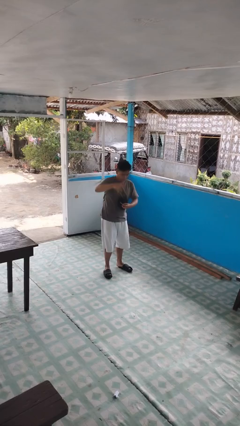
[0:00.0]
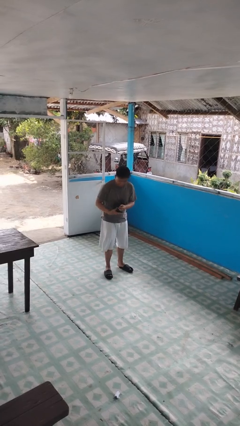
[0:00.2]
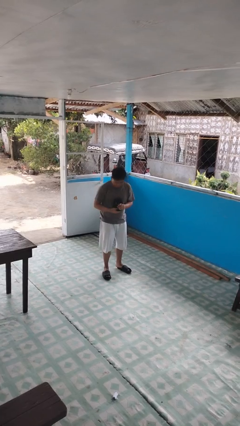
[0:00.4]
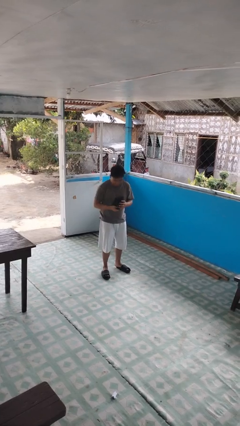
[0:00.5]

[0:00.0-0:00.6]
person catches dropped object

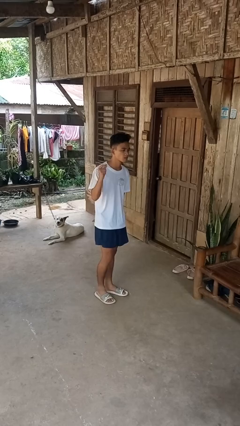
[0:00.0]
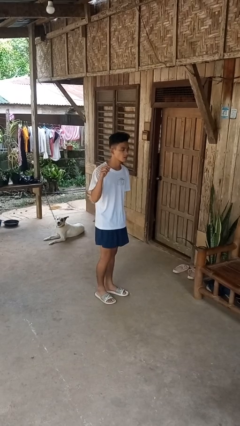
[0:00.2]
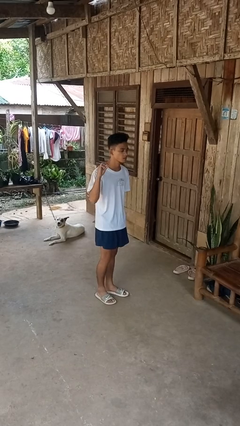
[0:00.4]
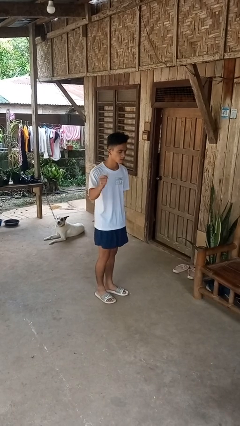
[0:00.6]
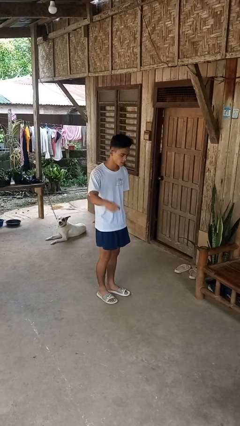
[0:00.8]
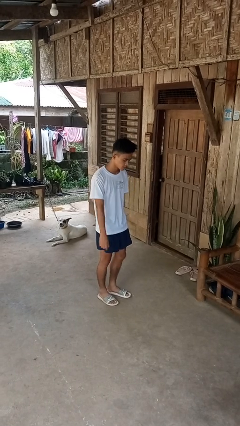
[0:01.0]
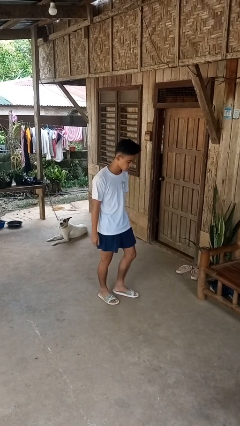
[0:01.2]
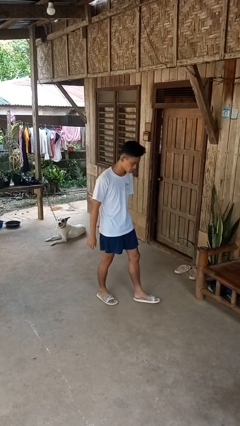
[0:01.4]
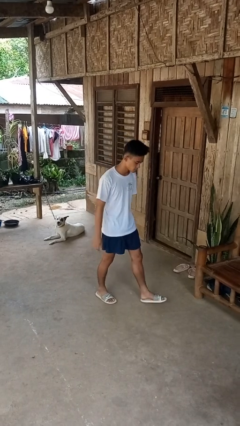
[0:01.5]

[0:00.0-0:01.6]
person snaps fingers

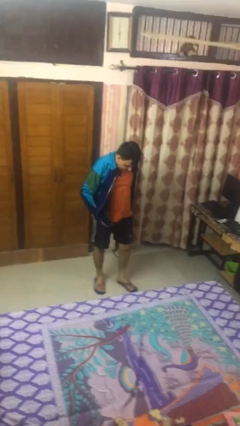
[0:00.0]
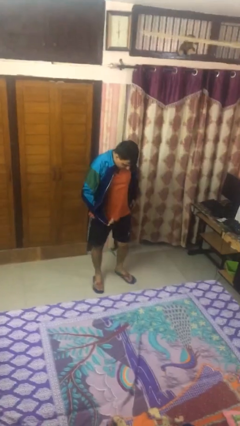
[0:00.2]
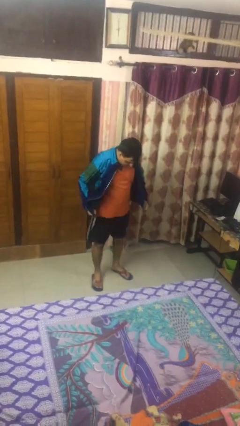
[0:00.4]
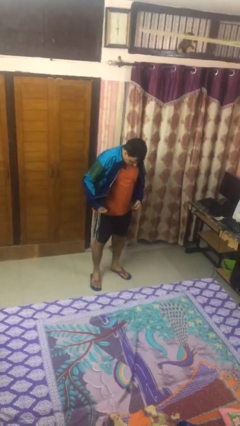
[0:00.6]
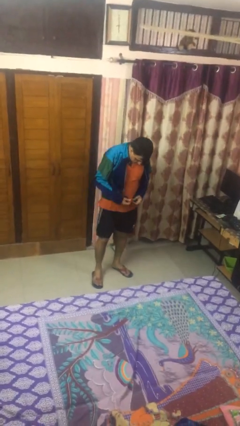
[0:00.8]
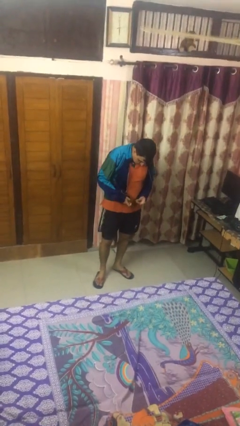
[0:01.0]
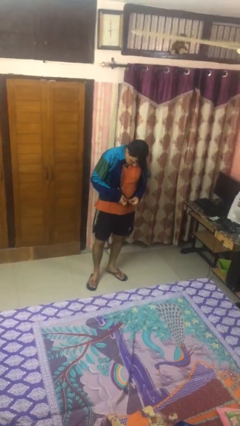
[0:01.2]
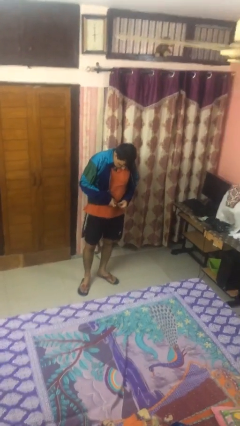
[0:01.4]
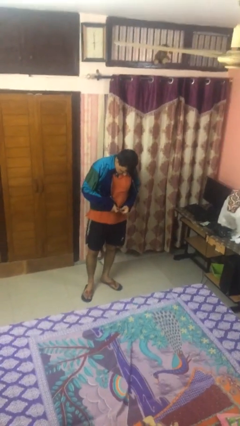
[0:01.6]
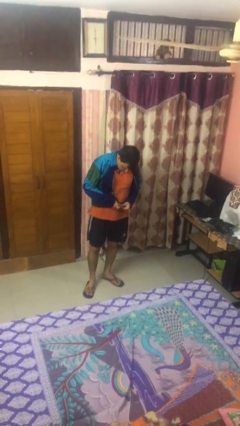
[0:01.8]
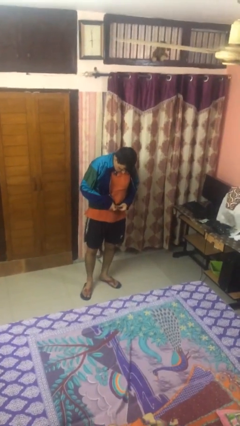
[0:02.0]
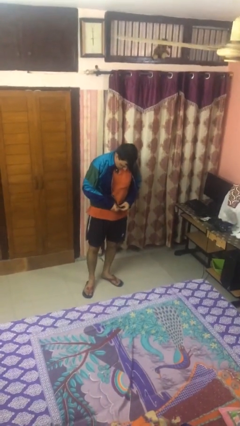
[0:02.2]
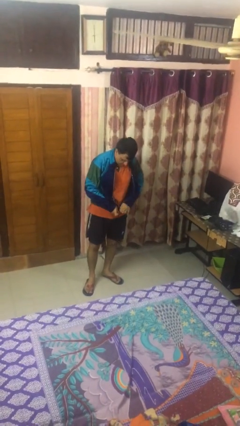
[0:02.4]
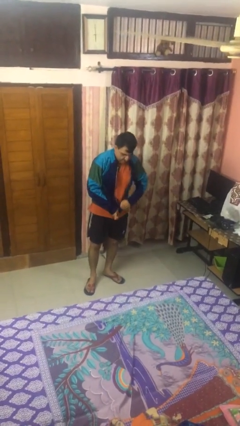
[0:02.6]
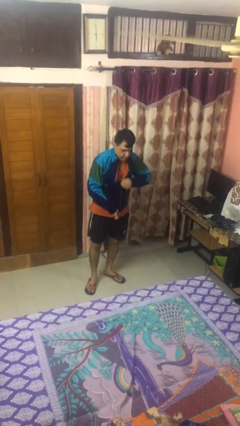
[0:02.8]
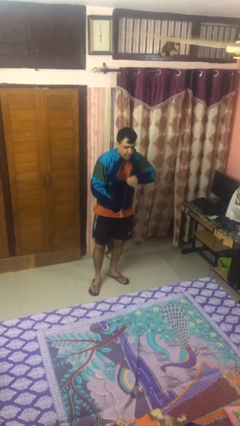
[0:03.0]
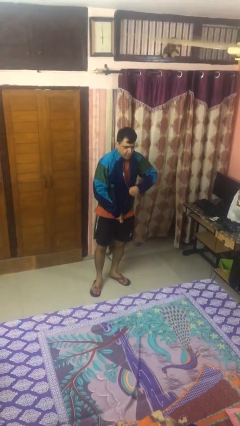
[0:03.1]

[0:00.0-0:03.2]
person zips up jacket

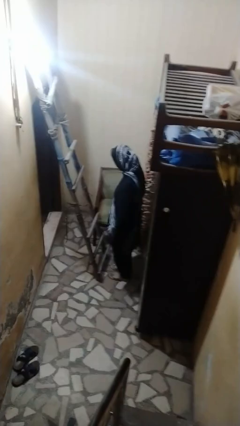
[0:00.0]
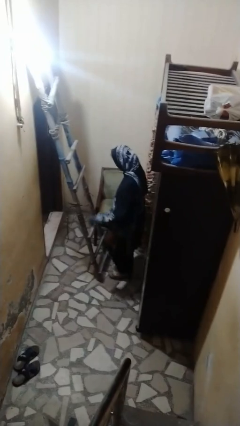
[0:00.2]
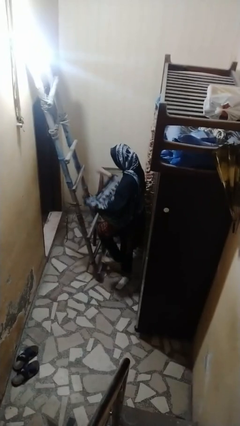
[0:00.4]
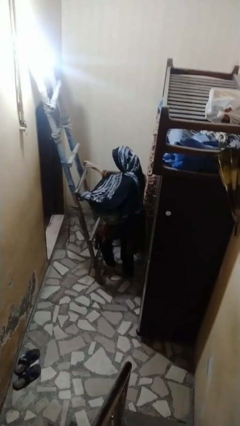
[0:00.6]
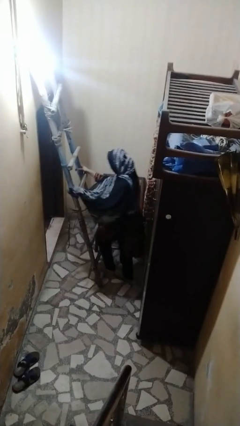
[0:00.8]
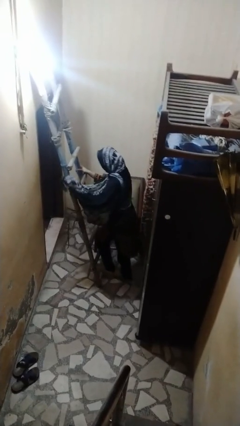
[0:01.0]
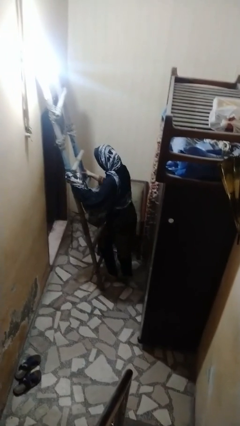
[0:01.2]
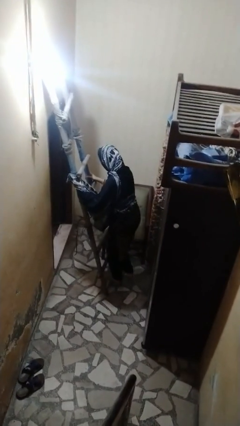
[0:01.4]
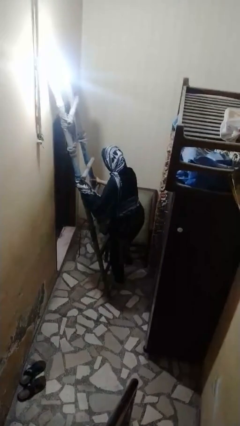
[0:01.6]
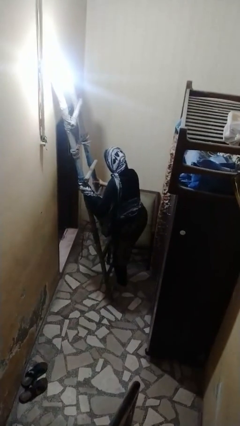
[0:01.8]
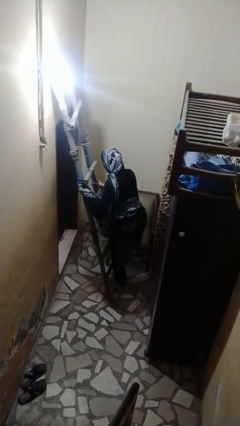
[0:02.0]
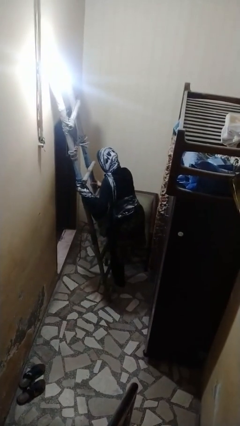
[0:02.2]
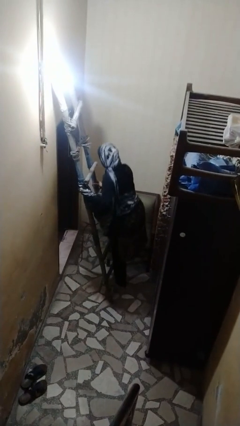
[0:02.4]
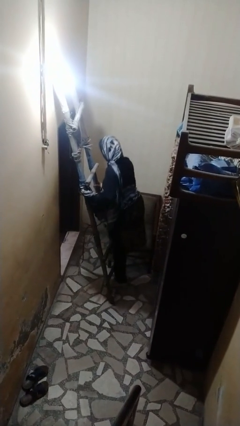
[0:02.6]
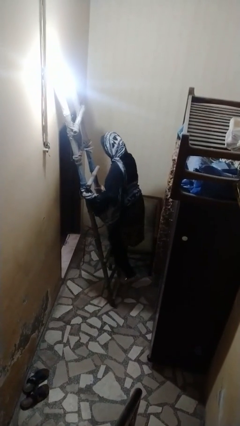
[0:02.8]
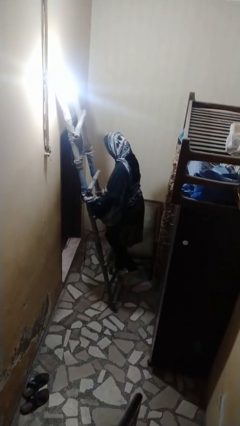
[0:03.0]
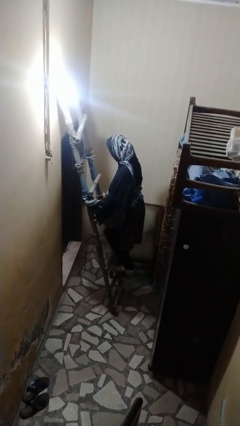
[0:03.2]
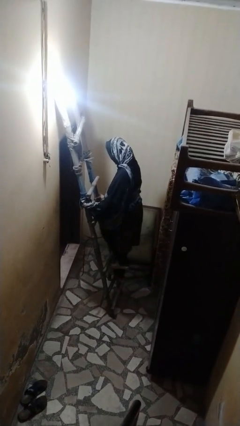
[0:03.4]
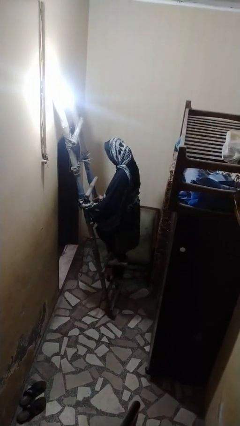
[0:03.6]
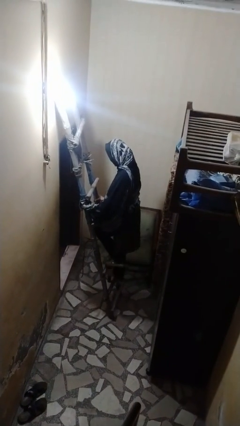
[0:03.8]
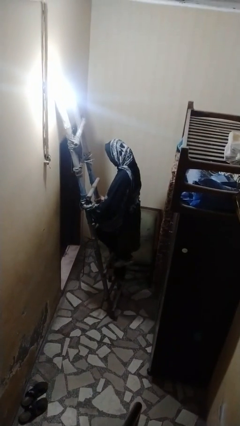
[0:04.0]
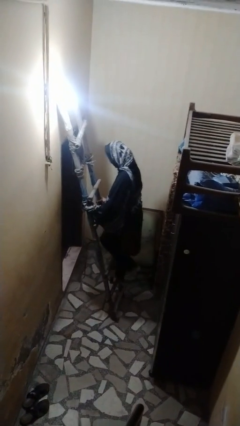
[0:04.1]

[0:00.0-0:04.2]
person climbs up ladder

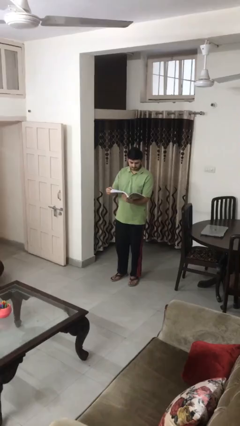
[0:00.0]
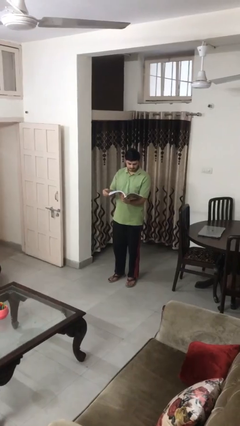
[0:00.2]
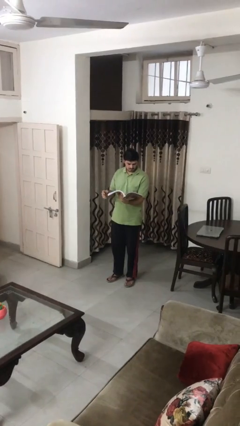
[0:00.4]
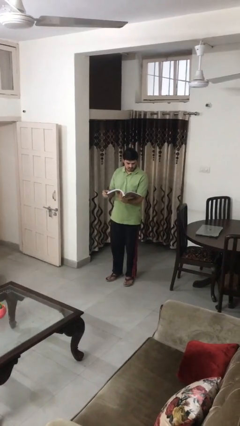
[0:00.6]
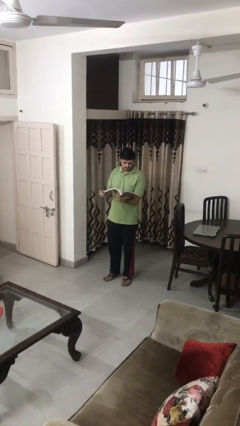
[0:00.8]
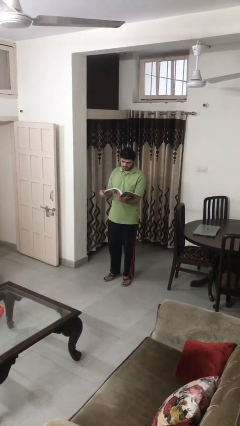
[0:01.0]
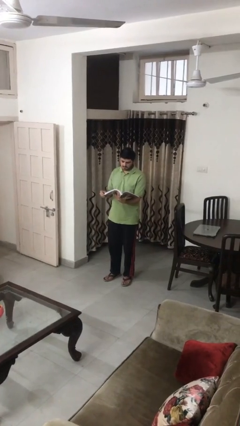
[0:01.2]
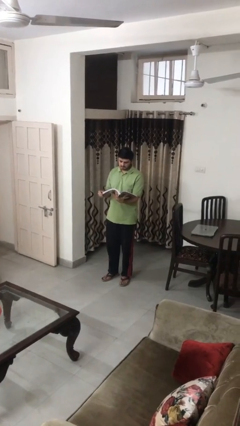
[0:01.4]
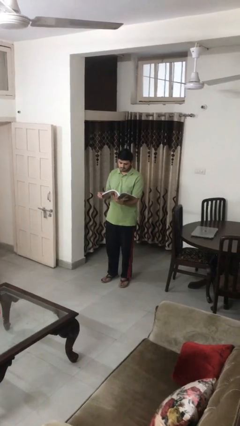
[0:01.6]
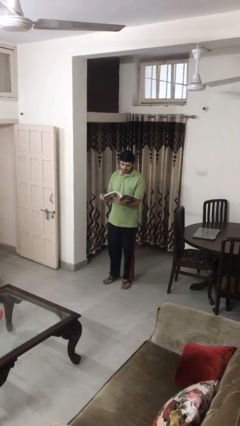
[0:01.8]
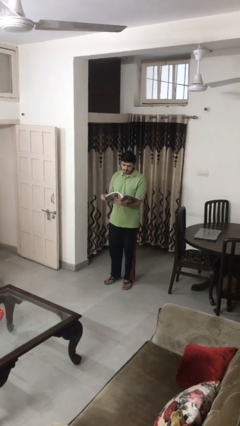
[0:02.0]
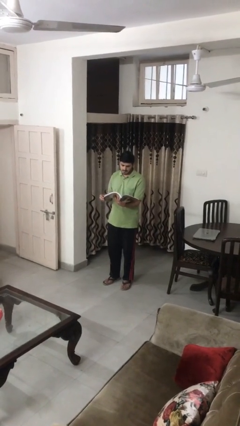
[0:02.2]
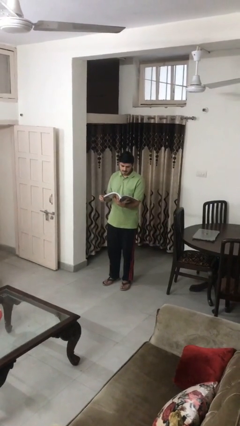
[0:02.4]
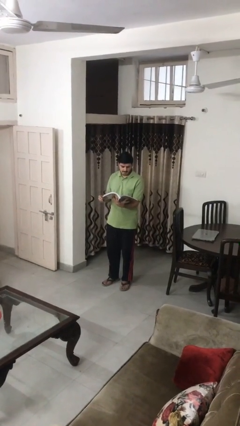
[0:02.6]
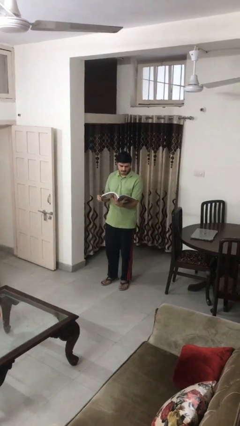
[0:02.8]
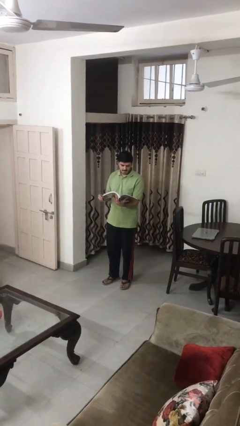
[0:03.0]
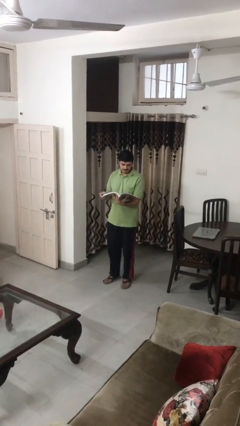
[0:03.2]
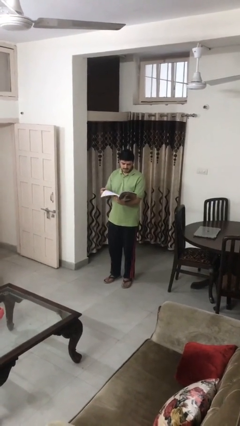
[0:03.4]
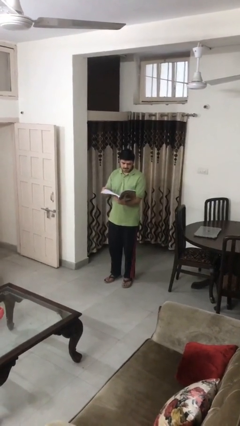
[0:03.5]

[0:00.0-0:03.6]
person reads document

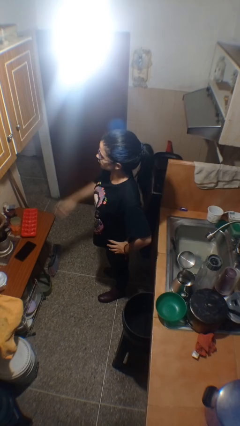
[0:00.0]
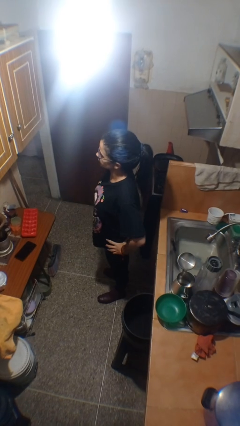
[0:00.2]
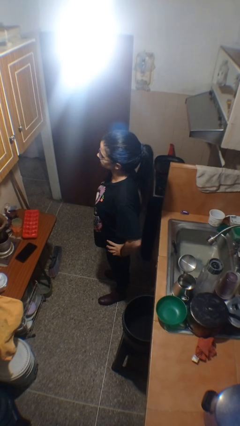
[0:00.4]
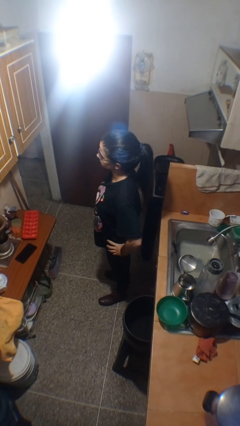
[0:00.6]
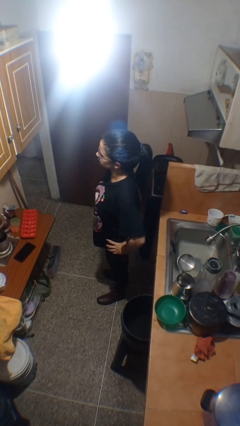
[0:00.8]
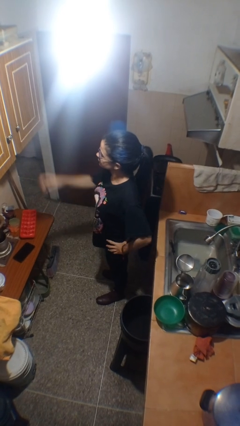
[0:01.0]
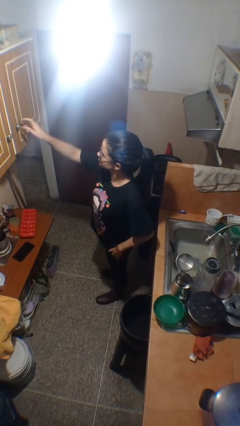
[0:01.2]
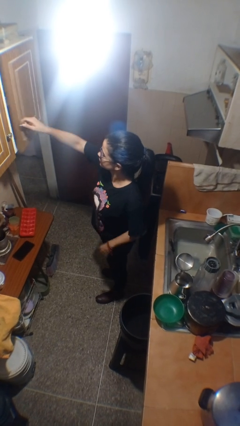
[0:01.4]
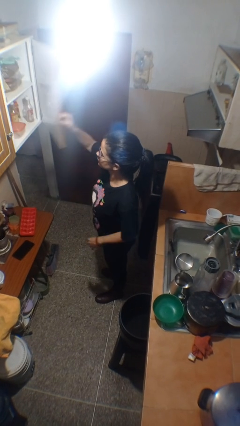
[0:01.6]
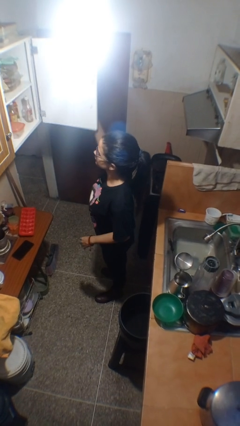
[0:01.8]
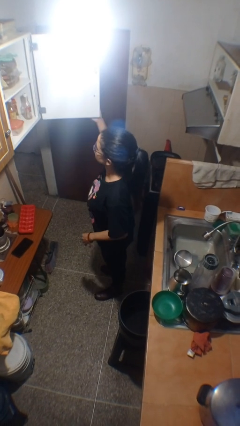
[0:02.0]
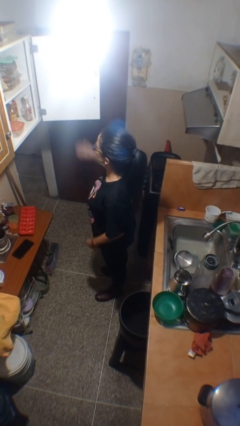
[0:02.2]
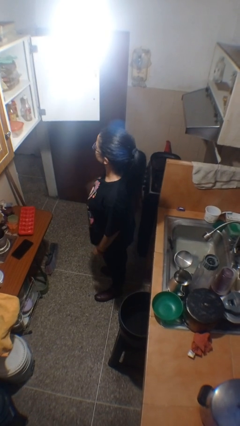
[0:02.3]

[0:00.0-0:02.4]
person opens cabinet

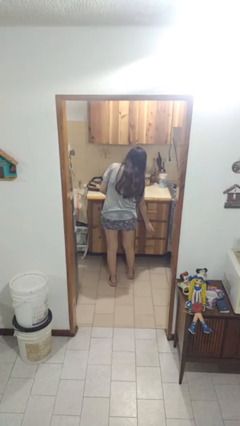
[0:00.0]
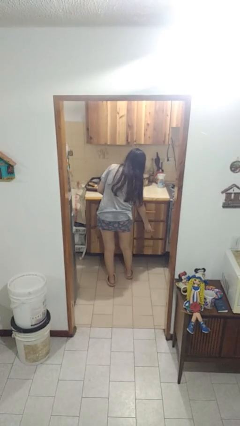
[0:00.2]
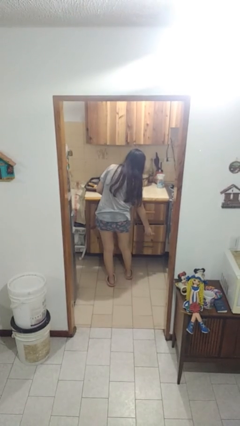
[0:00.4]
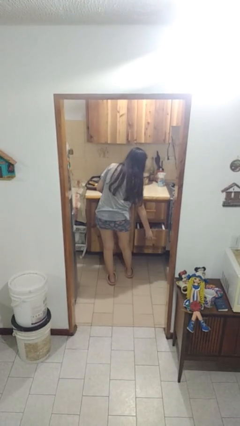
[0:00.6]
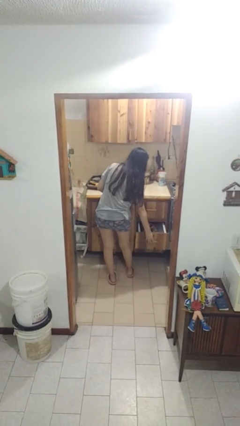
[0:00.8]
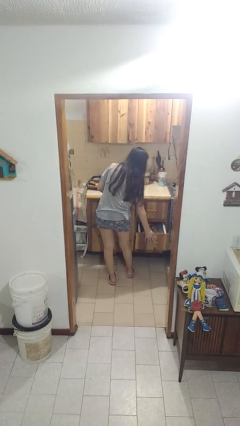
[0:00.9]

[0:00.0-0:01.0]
person opens kitchen drawer
